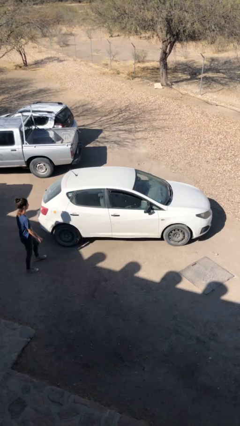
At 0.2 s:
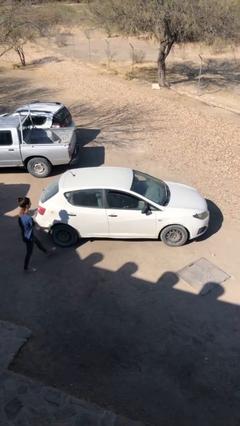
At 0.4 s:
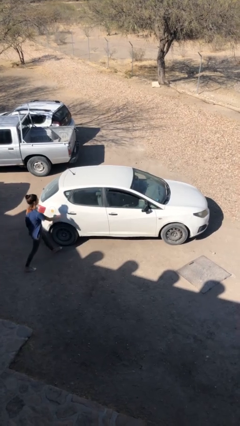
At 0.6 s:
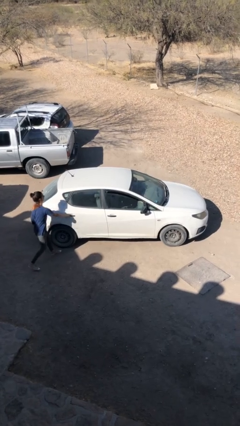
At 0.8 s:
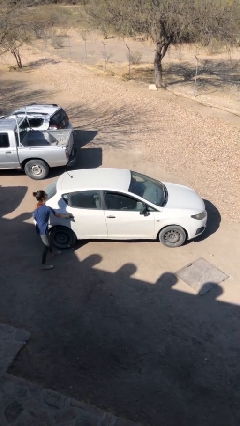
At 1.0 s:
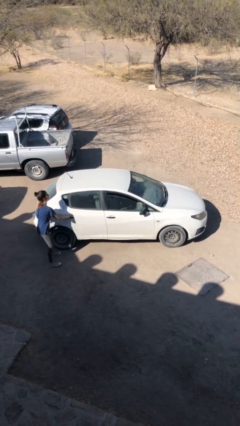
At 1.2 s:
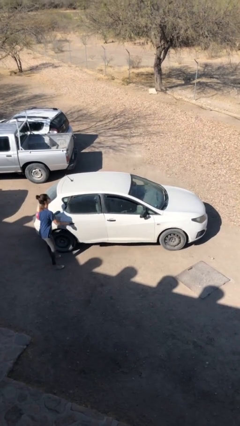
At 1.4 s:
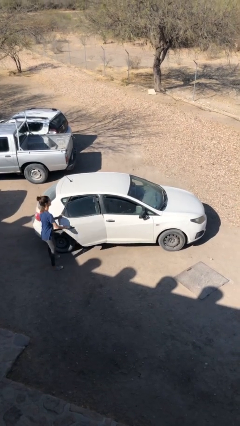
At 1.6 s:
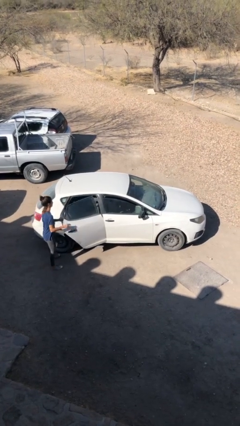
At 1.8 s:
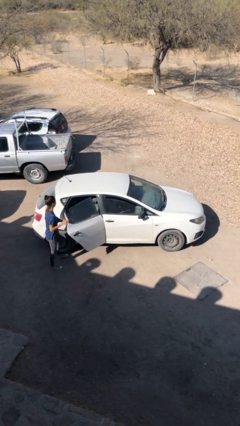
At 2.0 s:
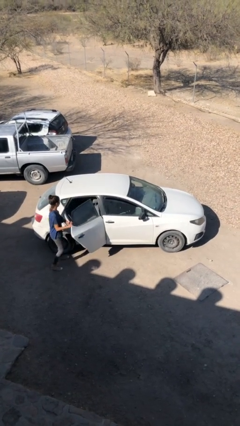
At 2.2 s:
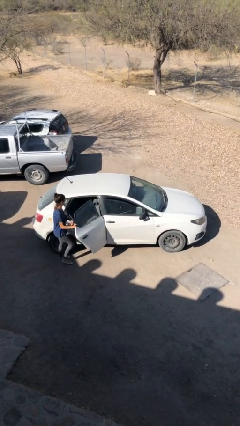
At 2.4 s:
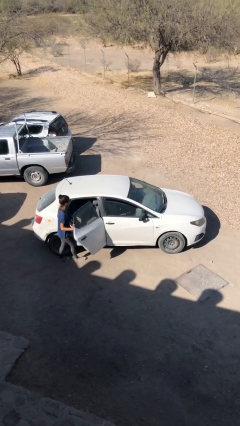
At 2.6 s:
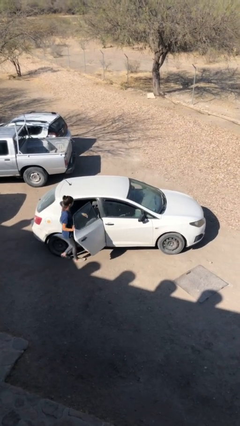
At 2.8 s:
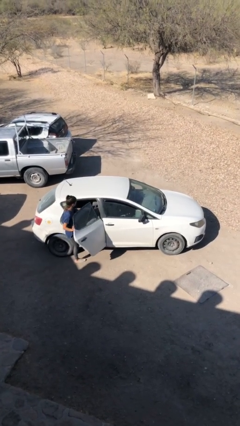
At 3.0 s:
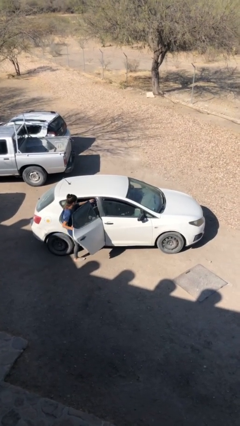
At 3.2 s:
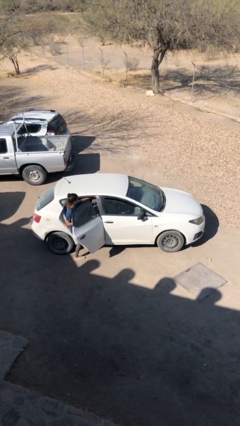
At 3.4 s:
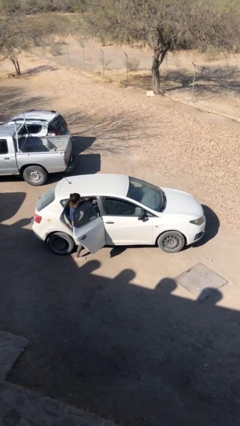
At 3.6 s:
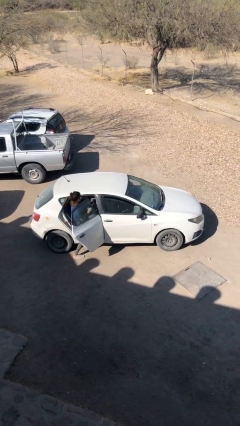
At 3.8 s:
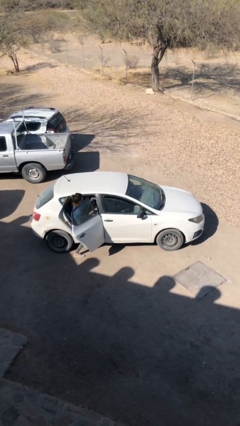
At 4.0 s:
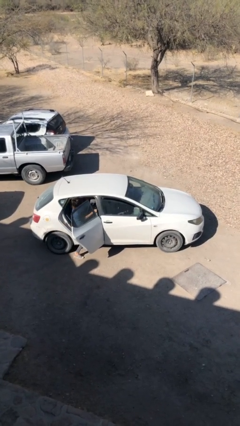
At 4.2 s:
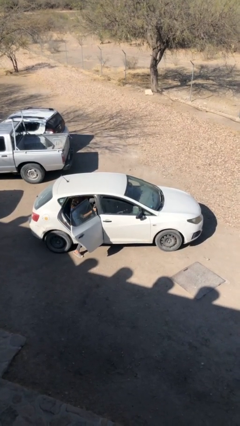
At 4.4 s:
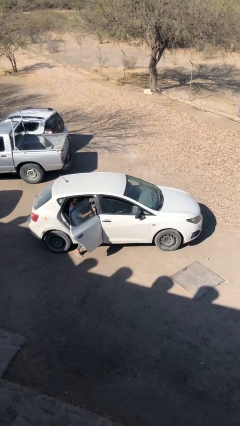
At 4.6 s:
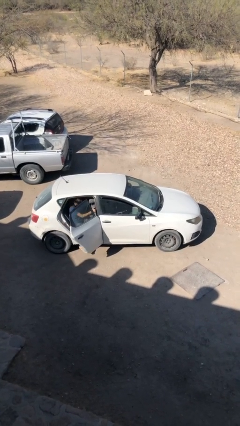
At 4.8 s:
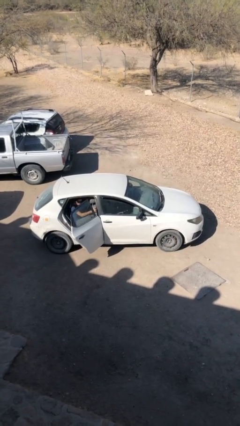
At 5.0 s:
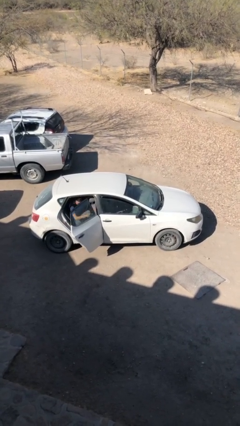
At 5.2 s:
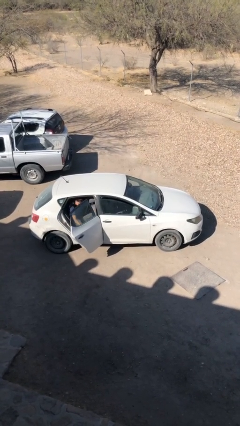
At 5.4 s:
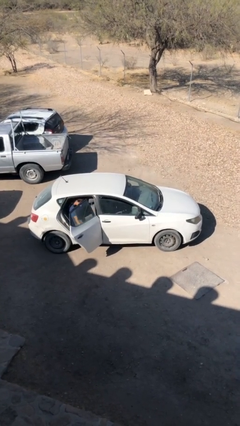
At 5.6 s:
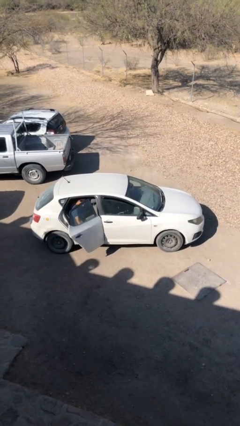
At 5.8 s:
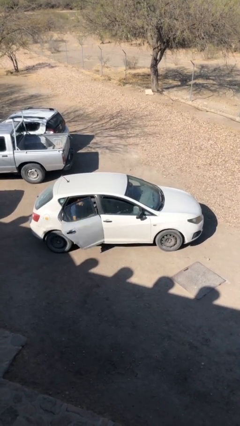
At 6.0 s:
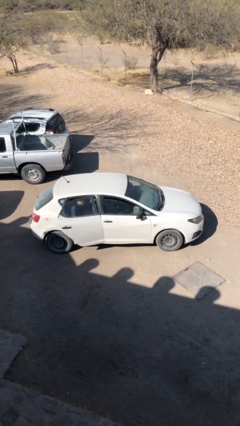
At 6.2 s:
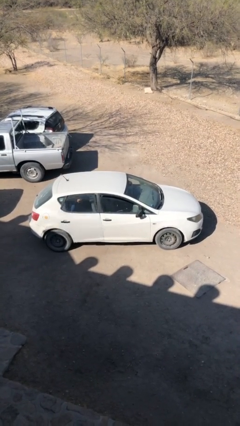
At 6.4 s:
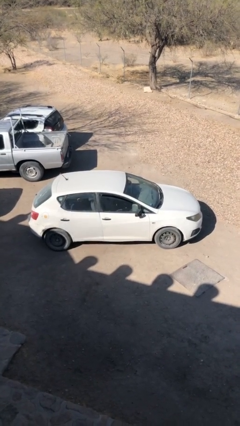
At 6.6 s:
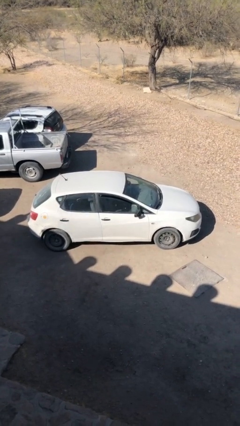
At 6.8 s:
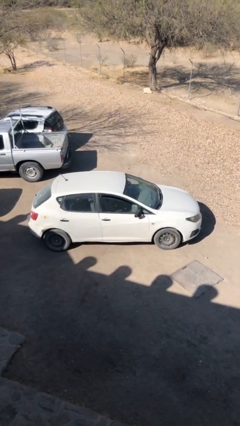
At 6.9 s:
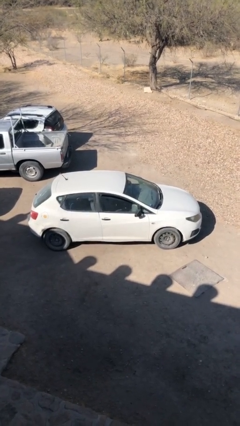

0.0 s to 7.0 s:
car picks up person

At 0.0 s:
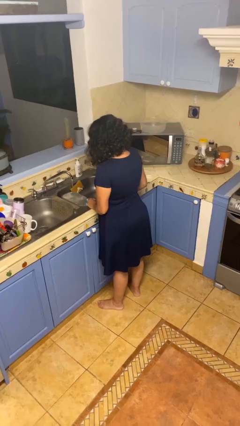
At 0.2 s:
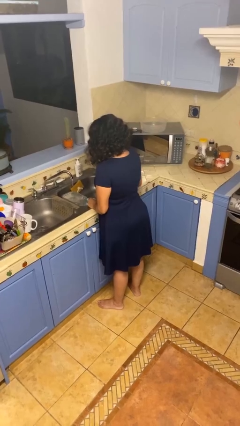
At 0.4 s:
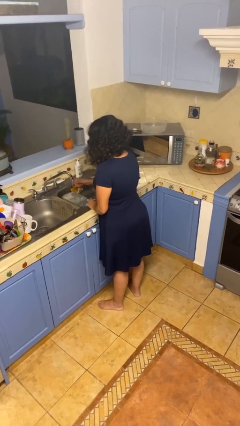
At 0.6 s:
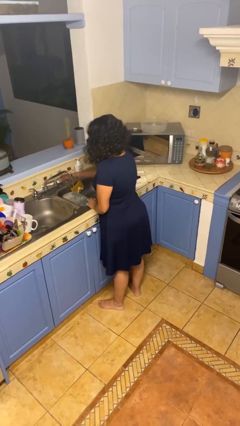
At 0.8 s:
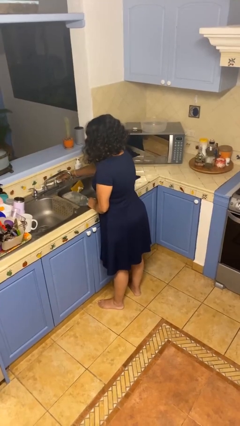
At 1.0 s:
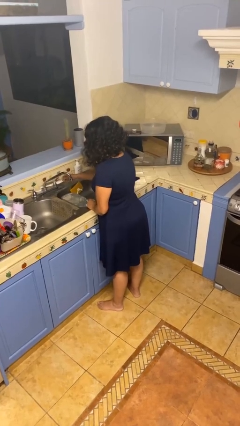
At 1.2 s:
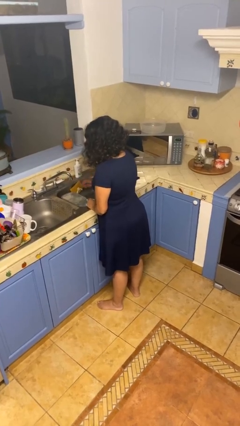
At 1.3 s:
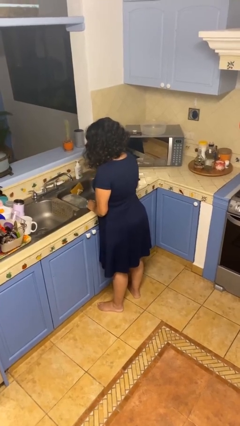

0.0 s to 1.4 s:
person turns off faucet

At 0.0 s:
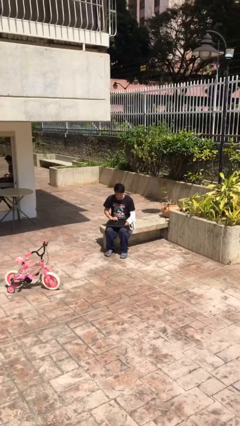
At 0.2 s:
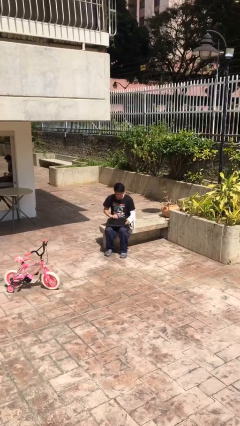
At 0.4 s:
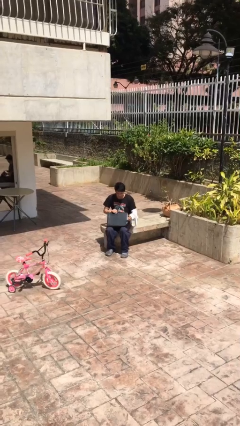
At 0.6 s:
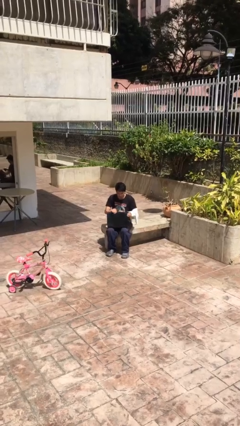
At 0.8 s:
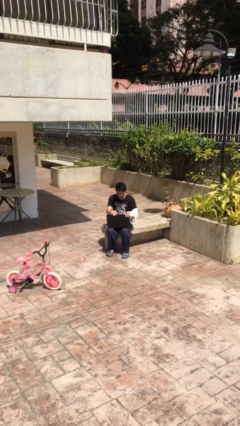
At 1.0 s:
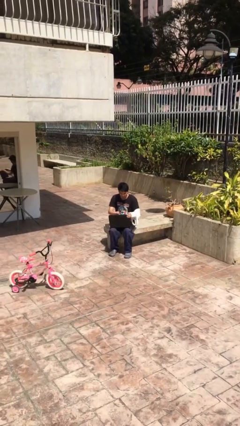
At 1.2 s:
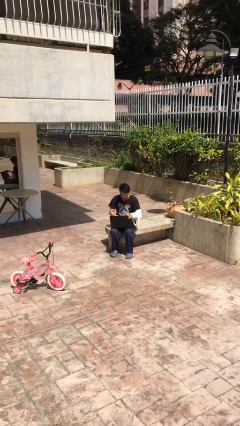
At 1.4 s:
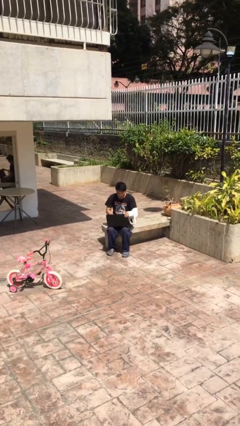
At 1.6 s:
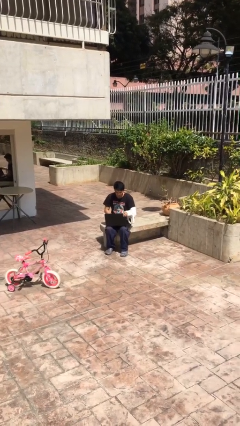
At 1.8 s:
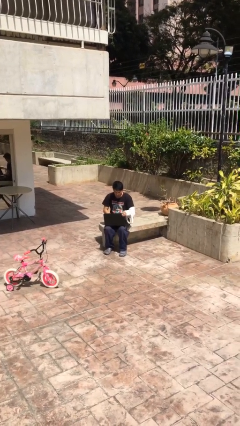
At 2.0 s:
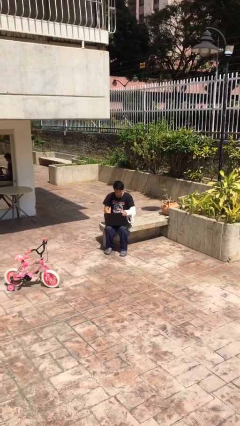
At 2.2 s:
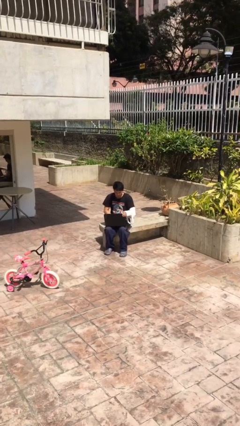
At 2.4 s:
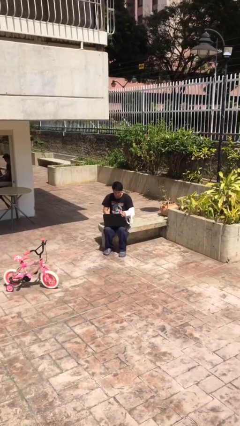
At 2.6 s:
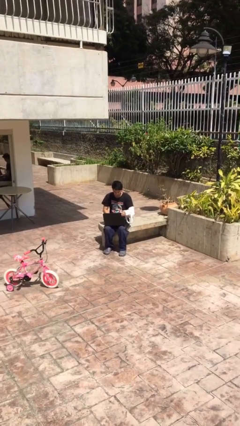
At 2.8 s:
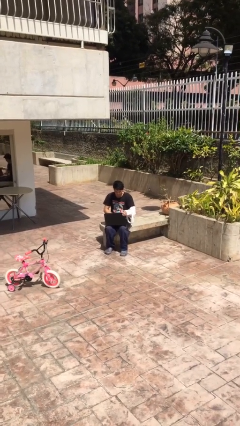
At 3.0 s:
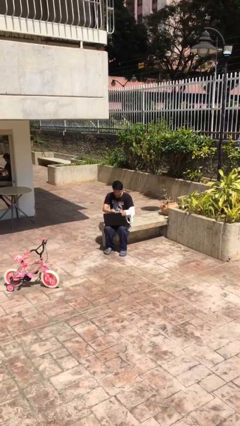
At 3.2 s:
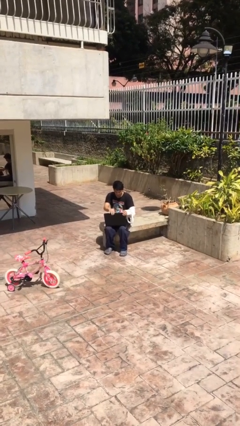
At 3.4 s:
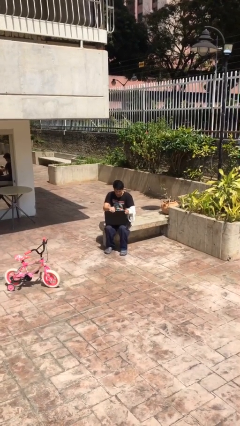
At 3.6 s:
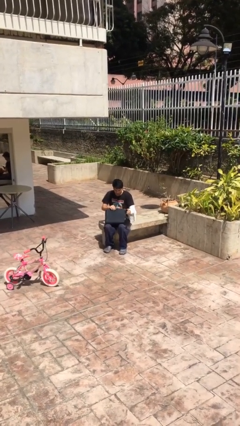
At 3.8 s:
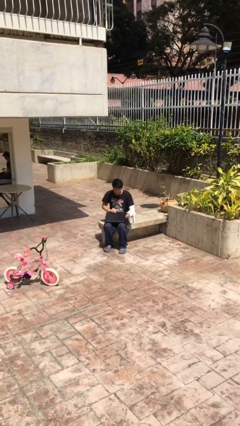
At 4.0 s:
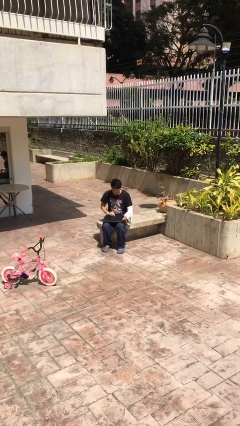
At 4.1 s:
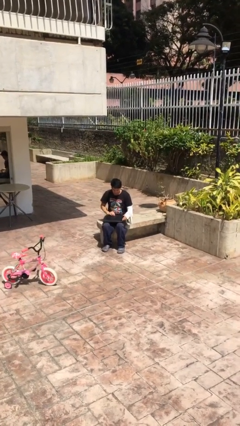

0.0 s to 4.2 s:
person interacts with laptop

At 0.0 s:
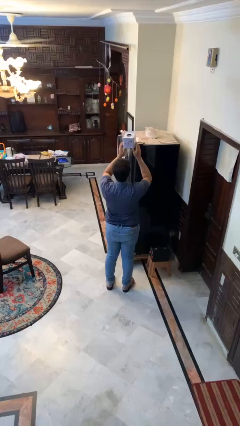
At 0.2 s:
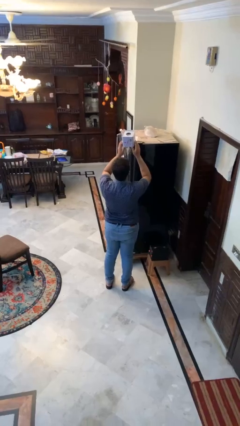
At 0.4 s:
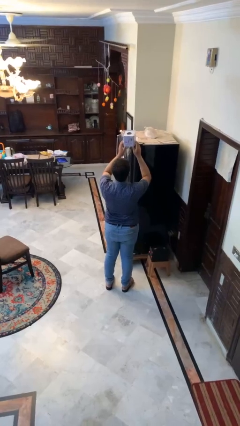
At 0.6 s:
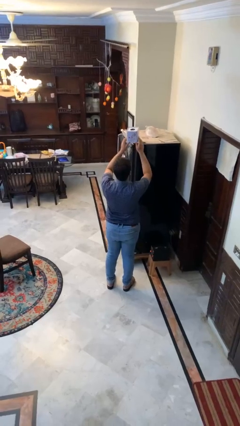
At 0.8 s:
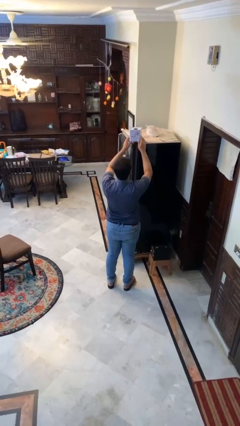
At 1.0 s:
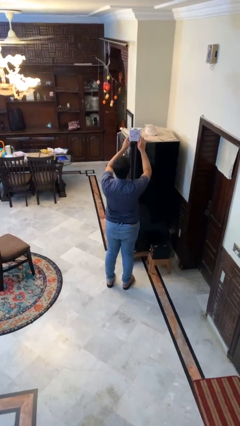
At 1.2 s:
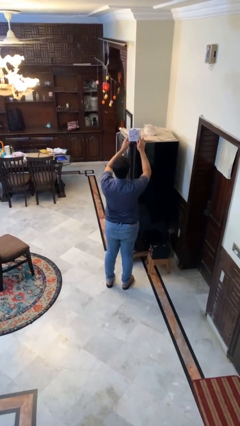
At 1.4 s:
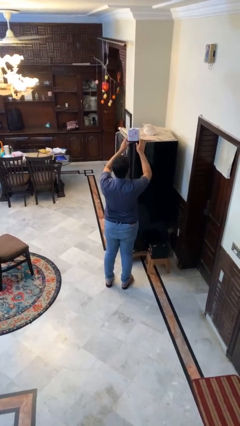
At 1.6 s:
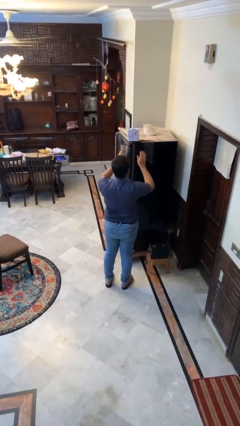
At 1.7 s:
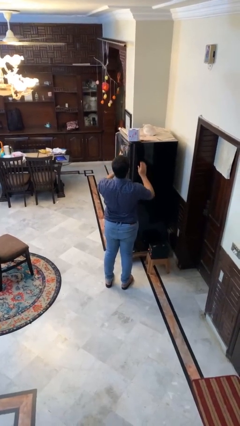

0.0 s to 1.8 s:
person puts down object on shelf

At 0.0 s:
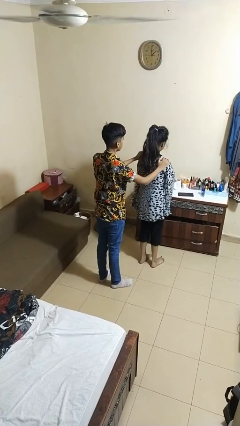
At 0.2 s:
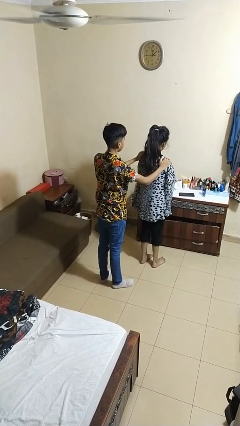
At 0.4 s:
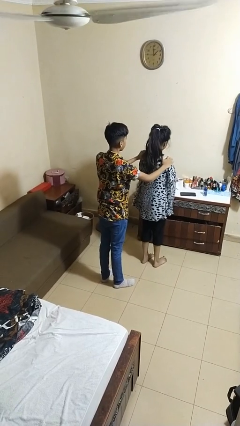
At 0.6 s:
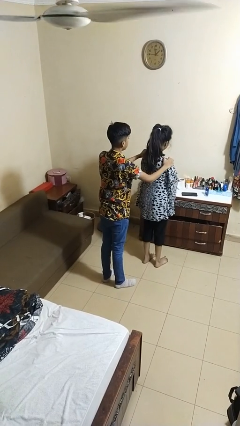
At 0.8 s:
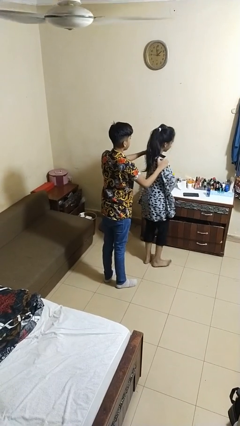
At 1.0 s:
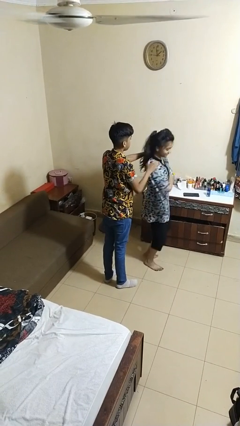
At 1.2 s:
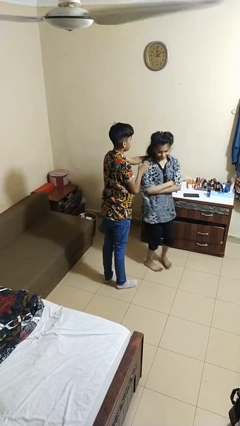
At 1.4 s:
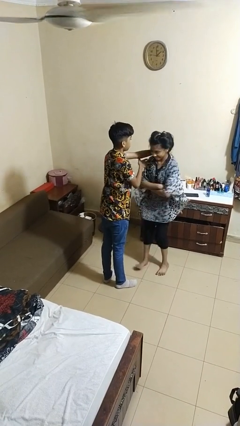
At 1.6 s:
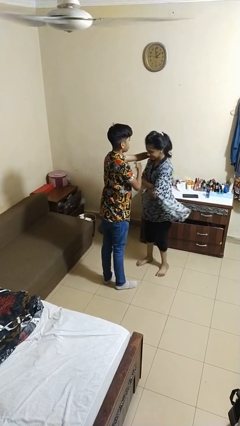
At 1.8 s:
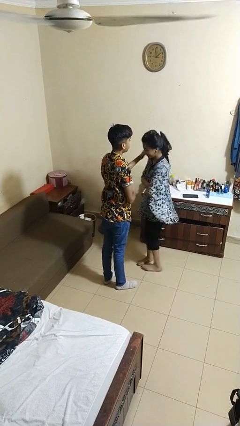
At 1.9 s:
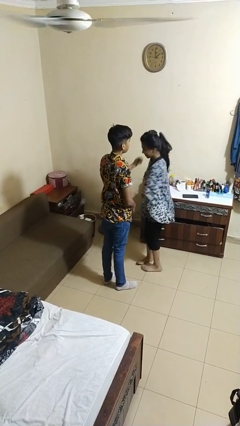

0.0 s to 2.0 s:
person spins person around

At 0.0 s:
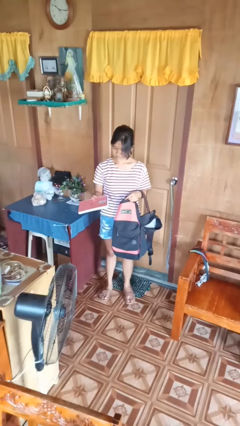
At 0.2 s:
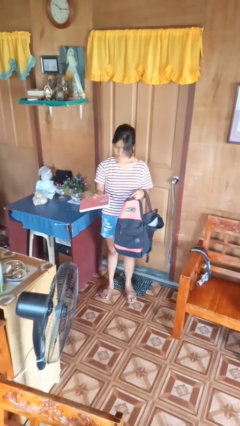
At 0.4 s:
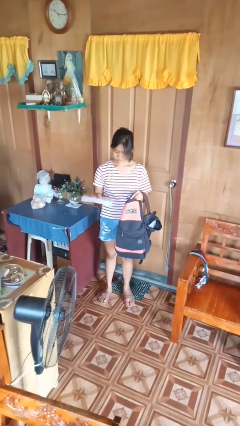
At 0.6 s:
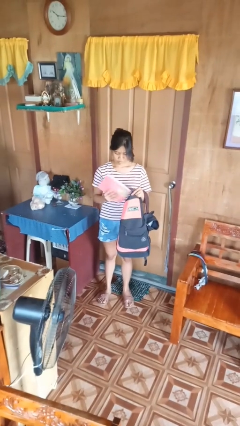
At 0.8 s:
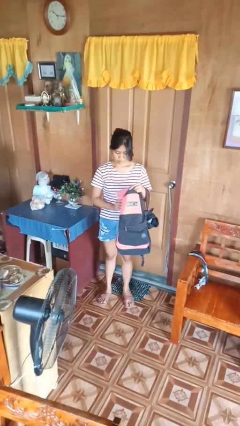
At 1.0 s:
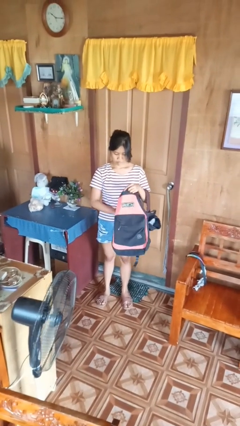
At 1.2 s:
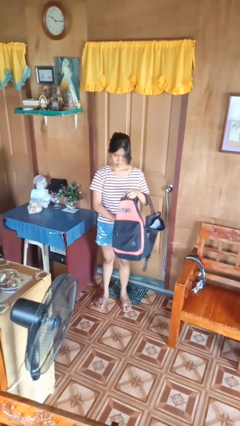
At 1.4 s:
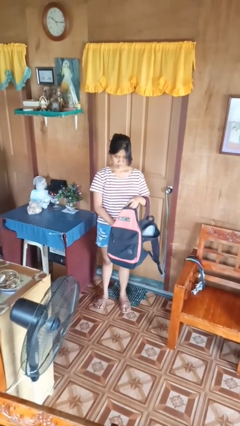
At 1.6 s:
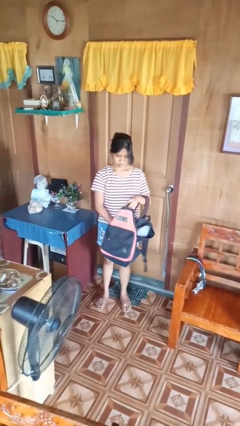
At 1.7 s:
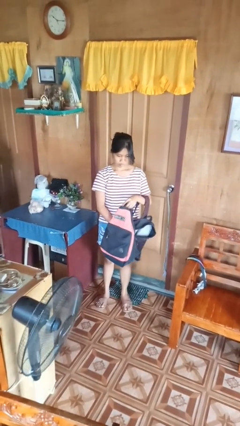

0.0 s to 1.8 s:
person puts object into backpack
